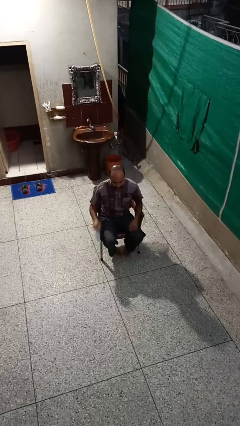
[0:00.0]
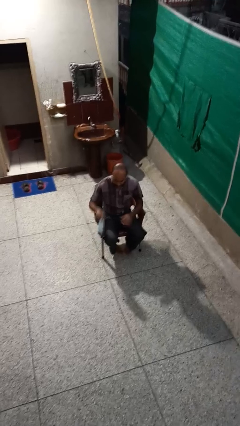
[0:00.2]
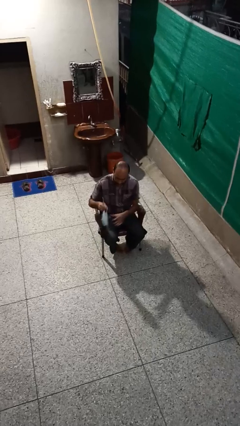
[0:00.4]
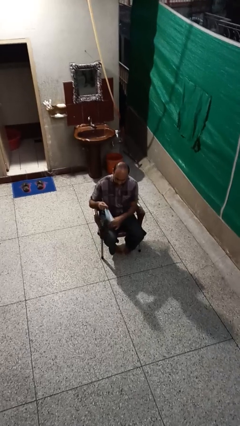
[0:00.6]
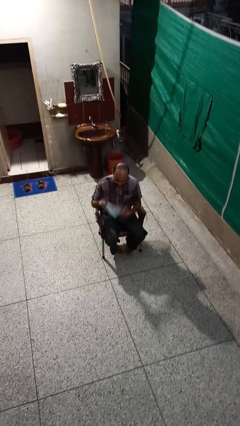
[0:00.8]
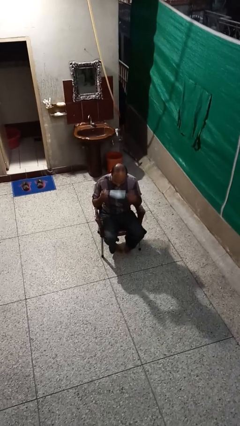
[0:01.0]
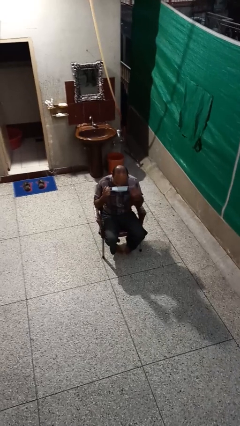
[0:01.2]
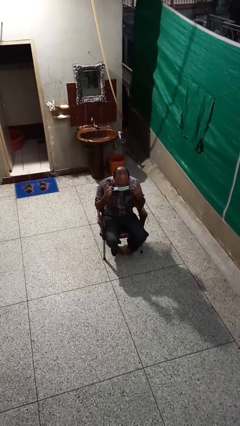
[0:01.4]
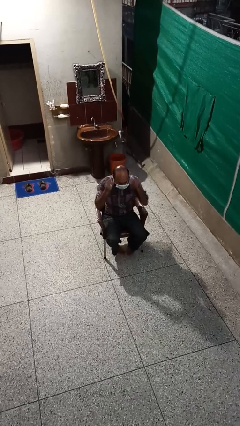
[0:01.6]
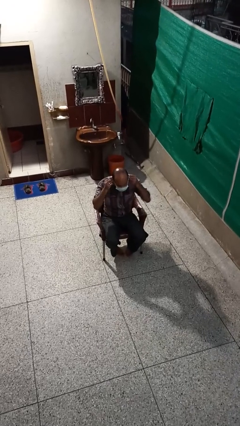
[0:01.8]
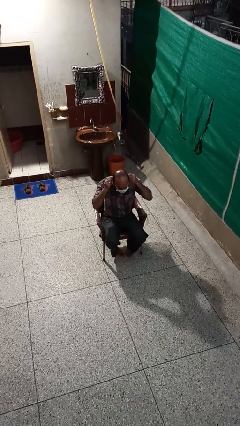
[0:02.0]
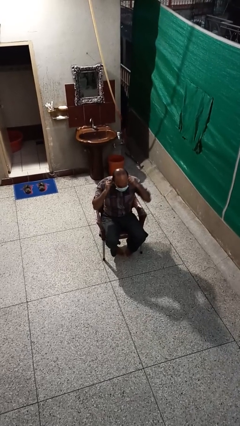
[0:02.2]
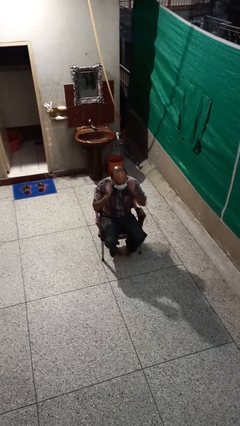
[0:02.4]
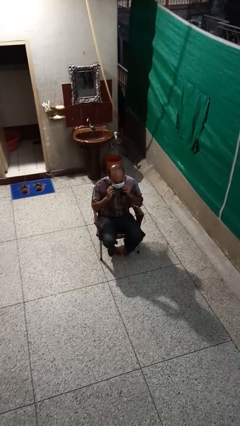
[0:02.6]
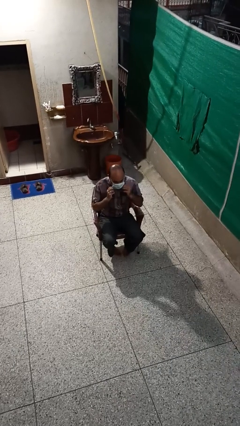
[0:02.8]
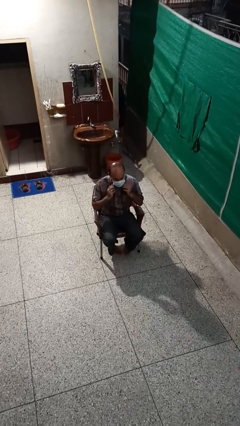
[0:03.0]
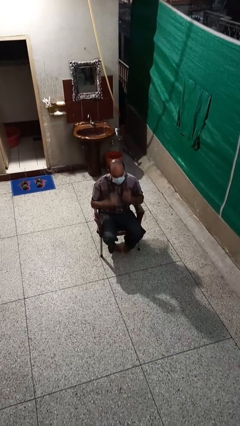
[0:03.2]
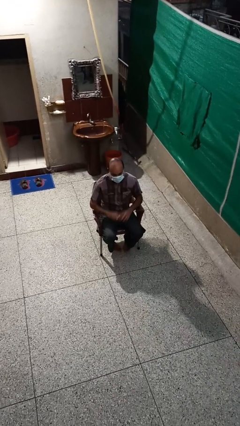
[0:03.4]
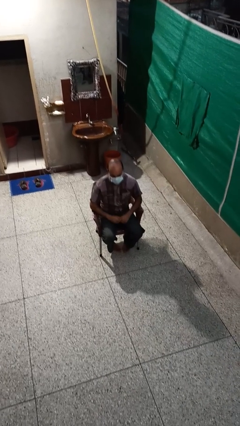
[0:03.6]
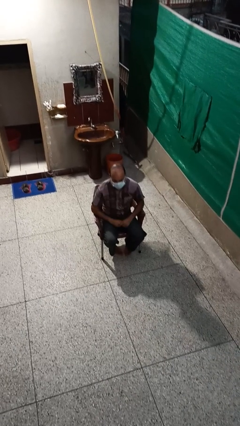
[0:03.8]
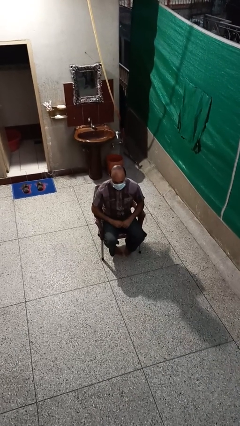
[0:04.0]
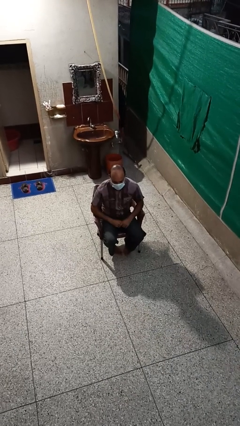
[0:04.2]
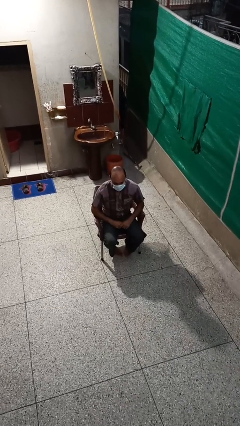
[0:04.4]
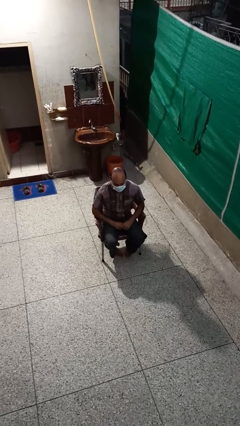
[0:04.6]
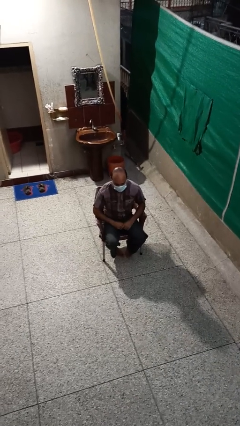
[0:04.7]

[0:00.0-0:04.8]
person puts on facemask

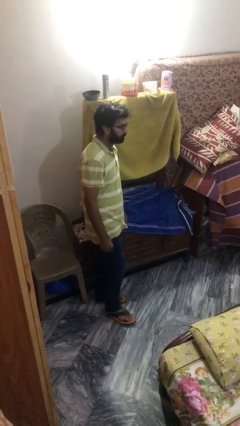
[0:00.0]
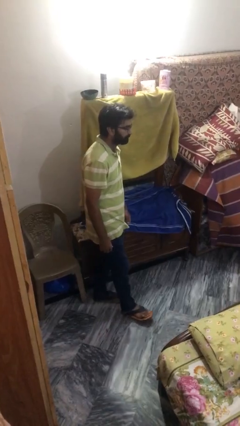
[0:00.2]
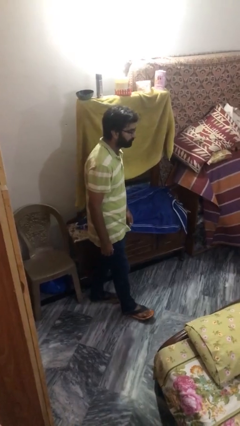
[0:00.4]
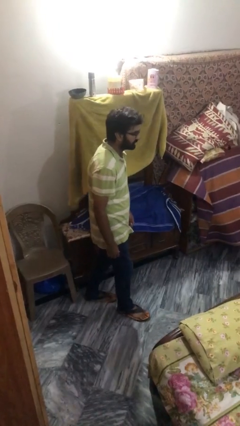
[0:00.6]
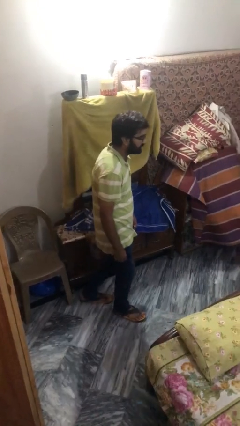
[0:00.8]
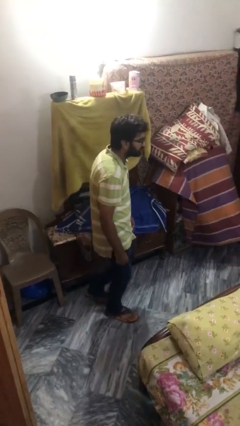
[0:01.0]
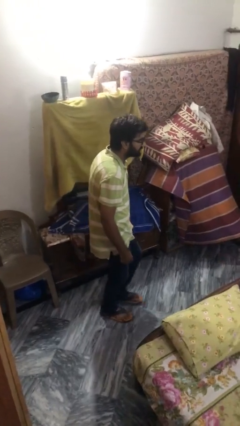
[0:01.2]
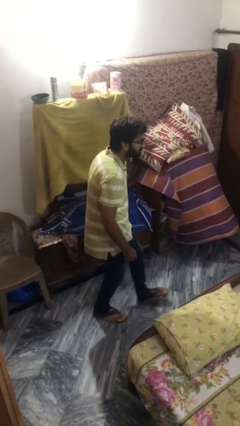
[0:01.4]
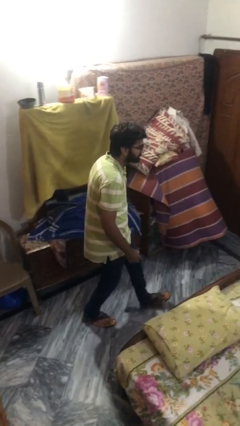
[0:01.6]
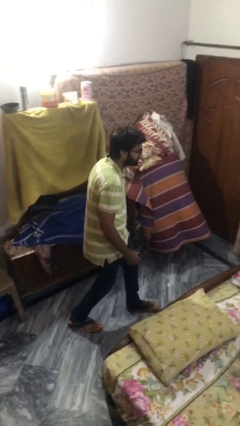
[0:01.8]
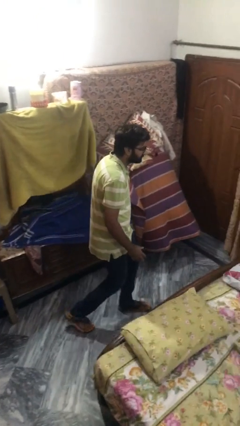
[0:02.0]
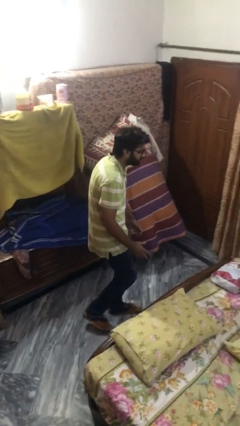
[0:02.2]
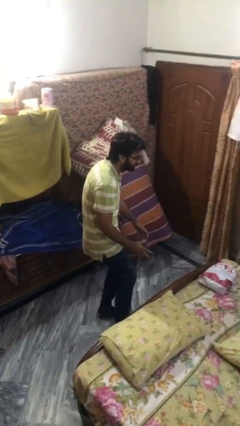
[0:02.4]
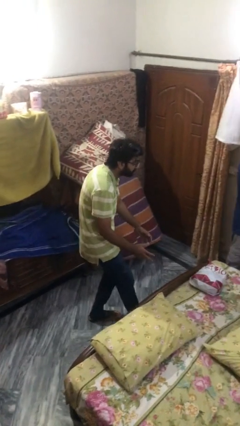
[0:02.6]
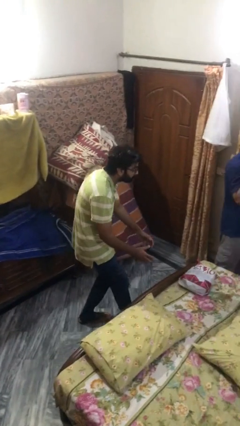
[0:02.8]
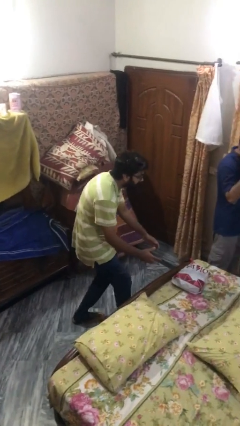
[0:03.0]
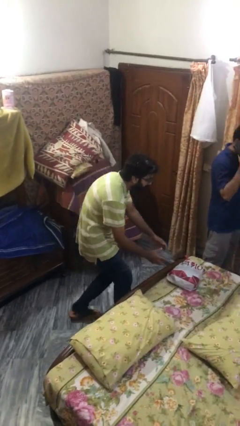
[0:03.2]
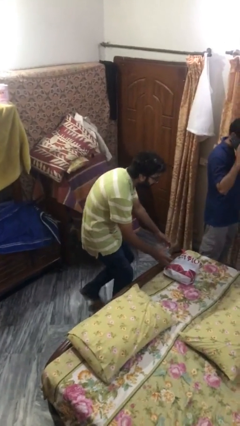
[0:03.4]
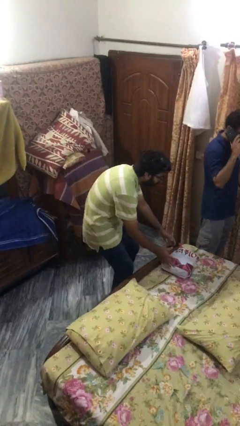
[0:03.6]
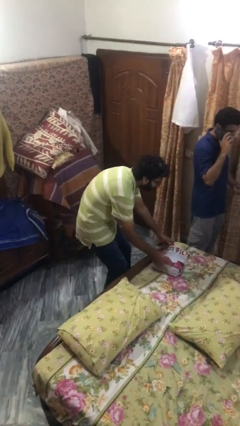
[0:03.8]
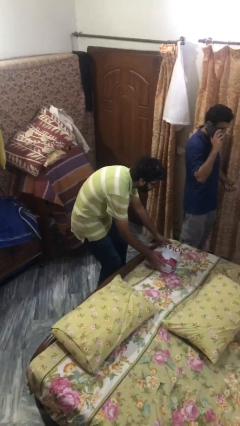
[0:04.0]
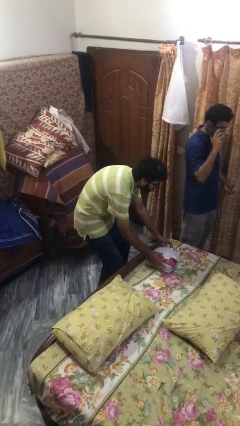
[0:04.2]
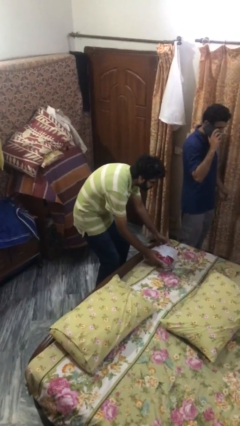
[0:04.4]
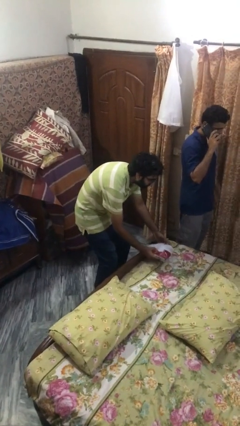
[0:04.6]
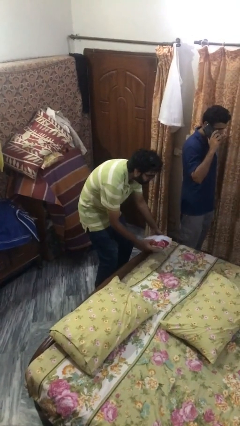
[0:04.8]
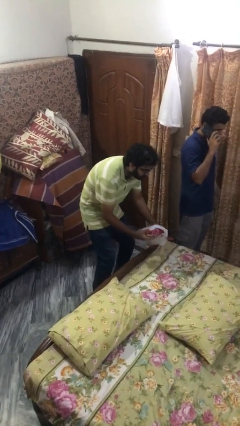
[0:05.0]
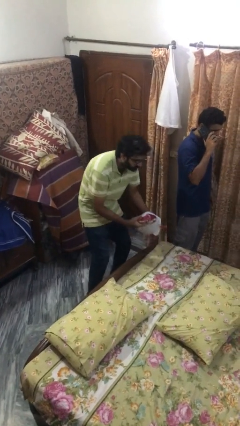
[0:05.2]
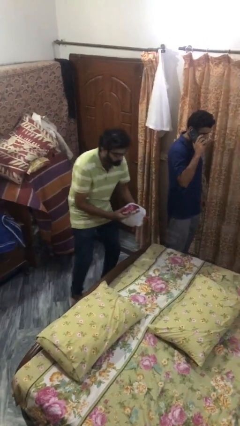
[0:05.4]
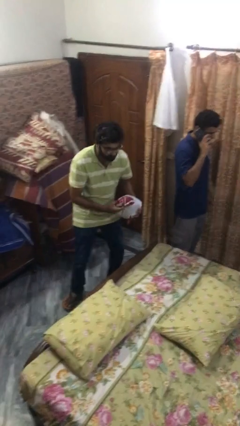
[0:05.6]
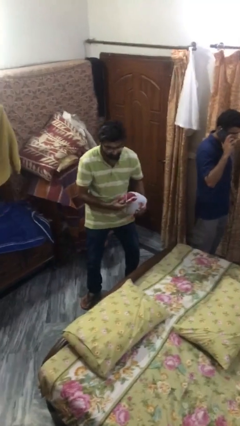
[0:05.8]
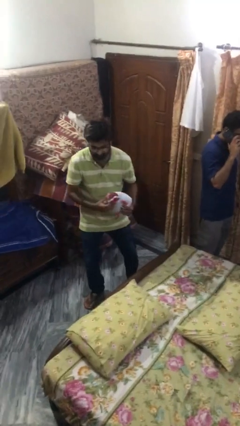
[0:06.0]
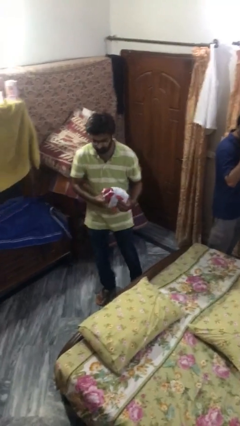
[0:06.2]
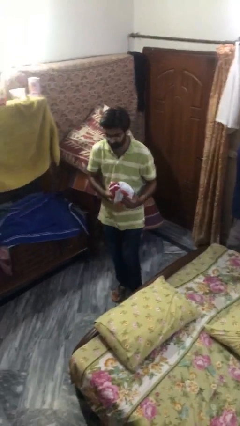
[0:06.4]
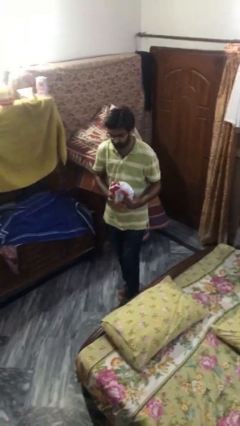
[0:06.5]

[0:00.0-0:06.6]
person steals object from person

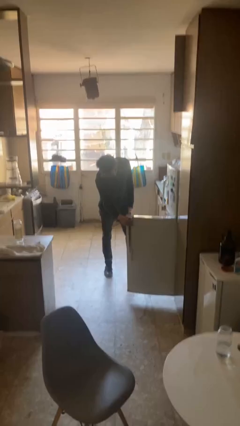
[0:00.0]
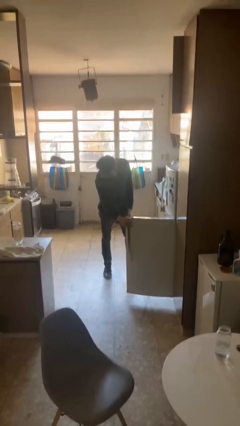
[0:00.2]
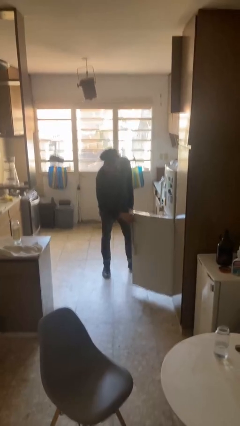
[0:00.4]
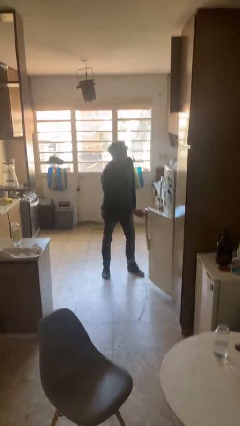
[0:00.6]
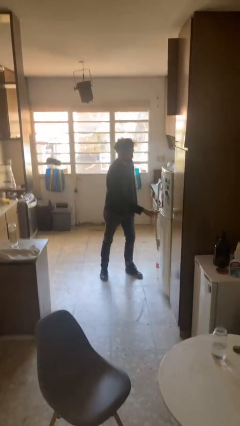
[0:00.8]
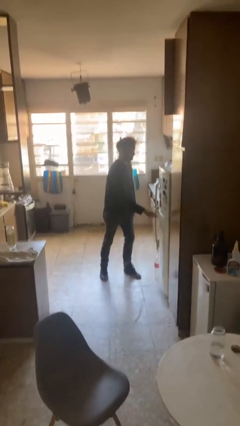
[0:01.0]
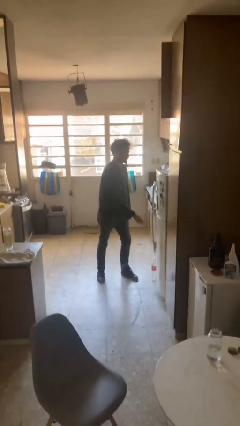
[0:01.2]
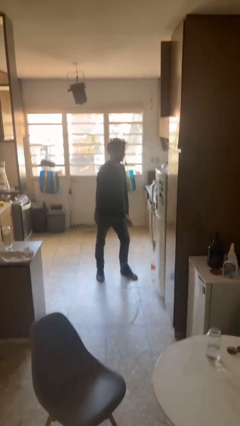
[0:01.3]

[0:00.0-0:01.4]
person closes refrigerator

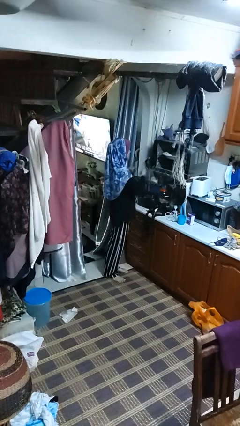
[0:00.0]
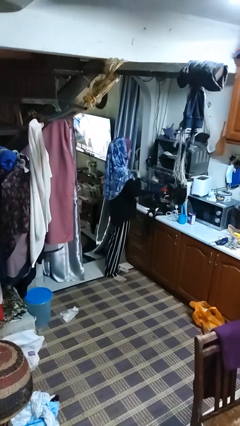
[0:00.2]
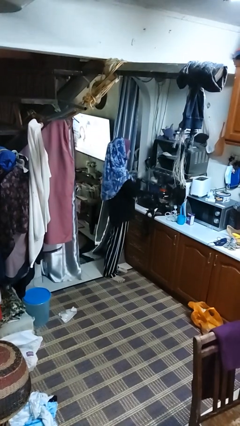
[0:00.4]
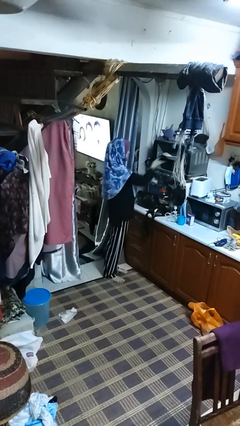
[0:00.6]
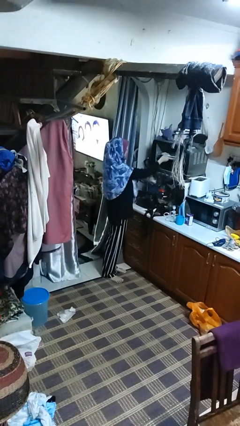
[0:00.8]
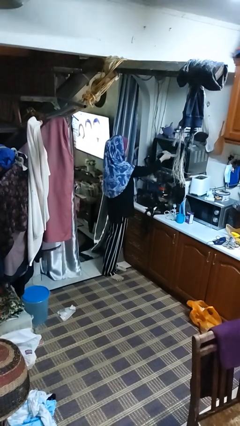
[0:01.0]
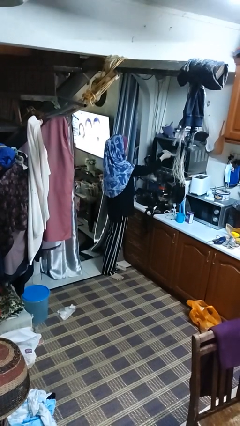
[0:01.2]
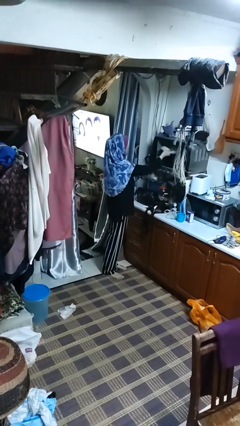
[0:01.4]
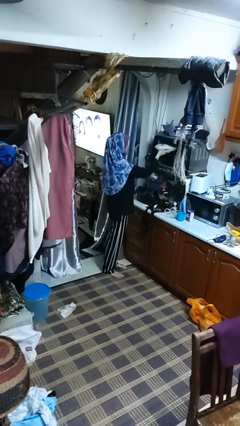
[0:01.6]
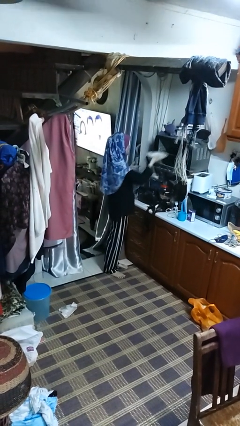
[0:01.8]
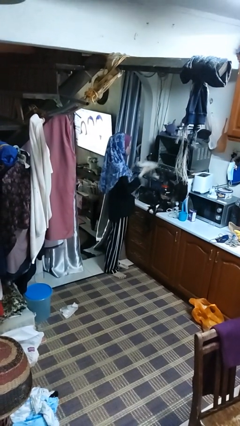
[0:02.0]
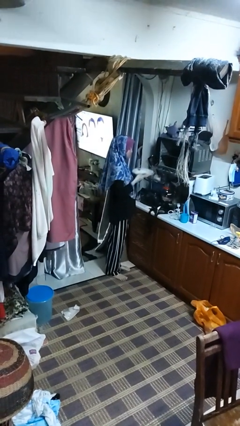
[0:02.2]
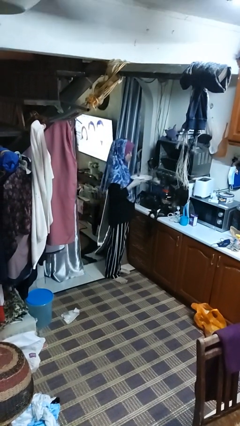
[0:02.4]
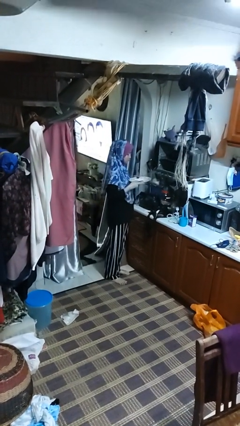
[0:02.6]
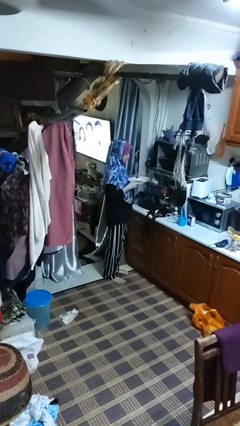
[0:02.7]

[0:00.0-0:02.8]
person takes object from oven

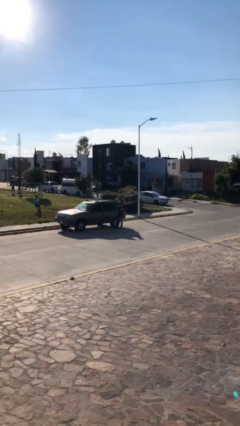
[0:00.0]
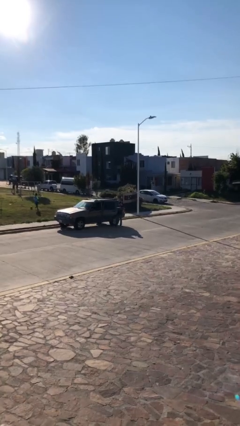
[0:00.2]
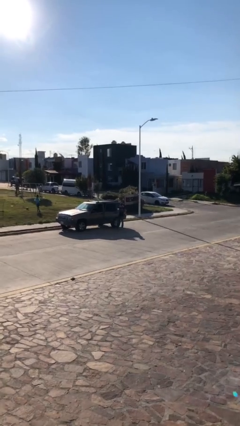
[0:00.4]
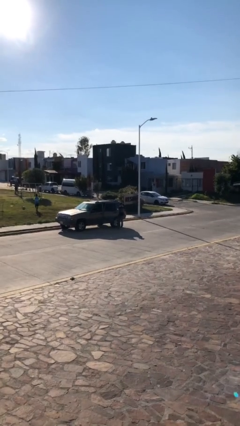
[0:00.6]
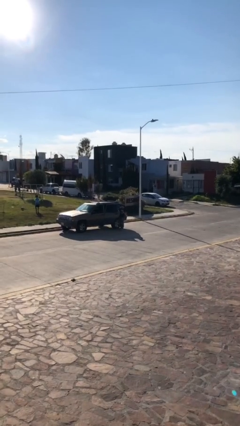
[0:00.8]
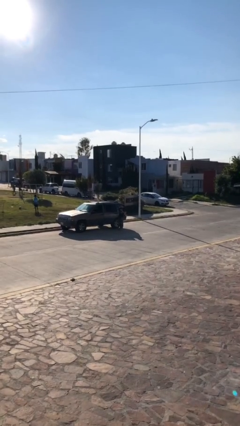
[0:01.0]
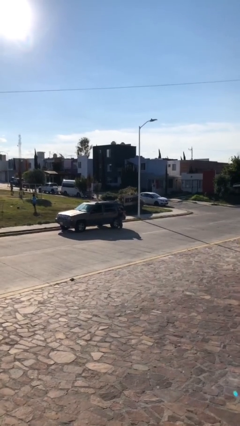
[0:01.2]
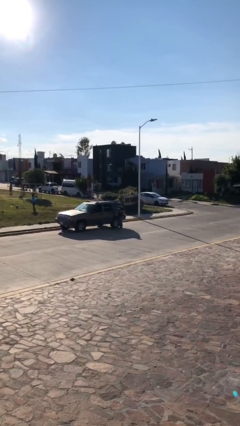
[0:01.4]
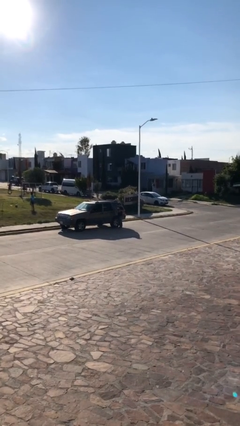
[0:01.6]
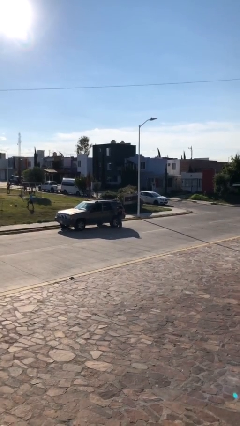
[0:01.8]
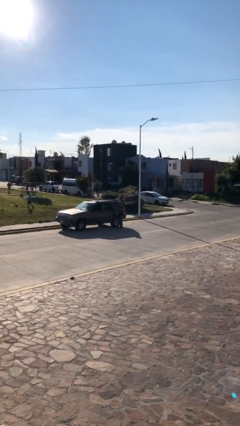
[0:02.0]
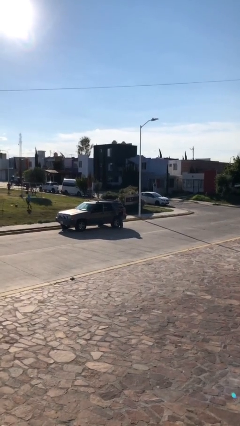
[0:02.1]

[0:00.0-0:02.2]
person closes car door
